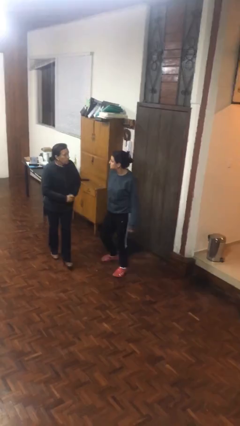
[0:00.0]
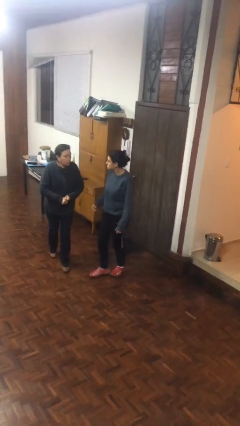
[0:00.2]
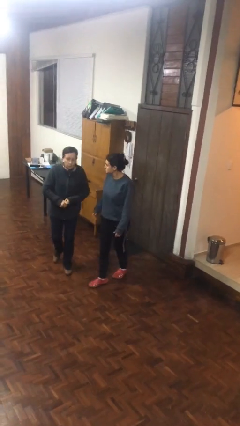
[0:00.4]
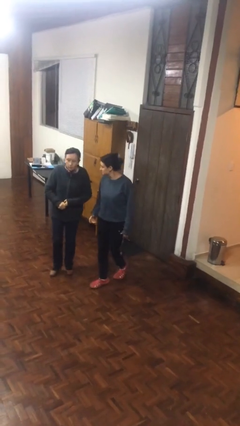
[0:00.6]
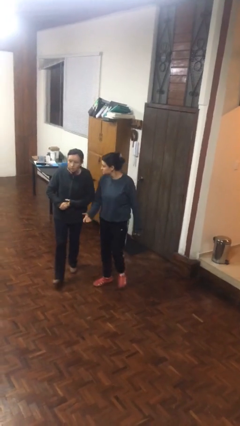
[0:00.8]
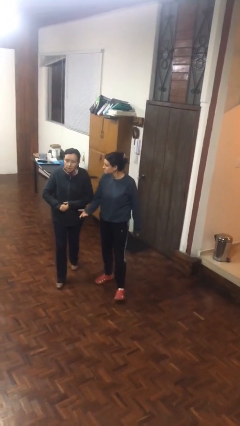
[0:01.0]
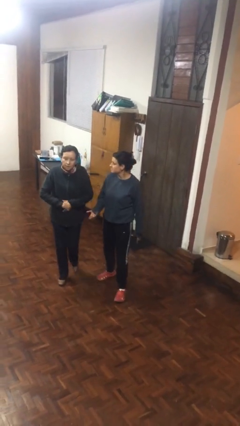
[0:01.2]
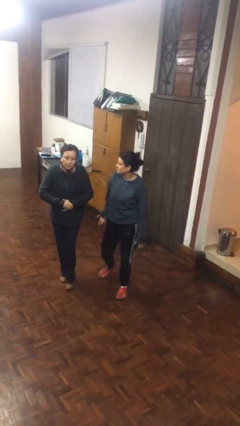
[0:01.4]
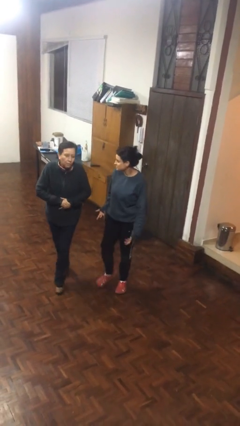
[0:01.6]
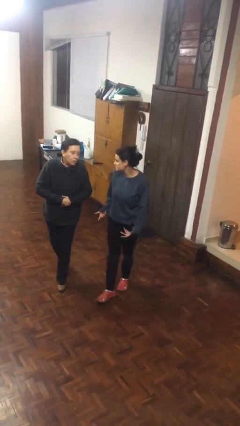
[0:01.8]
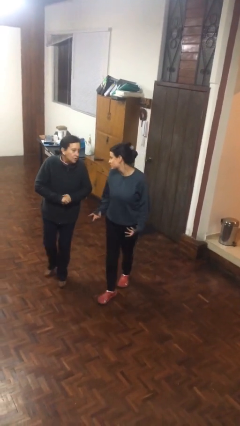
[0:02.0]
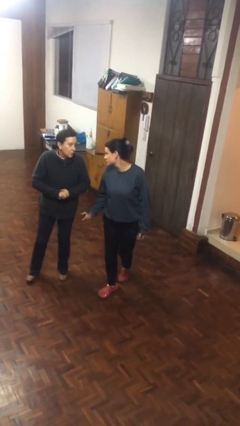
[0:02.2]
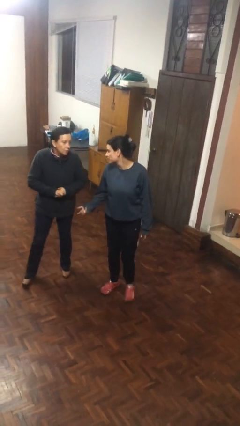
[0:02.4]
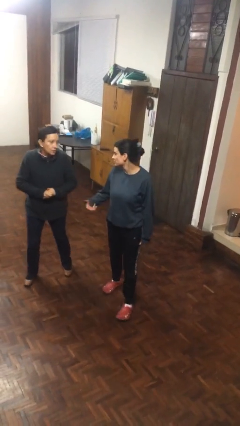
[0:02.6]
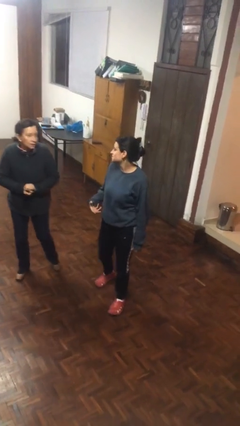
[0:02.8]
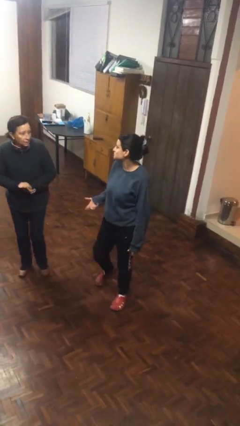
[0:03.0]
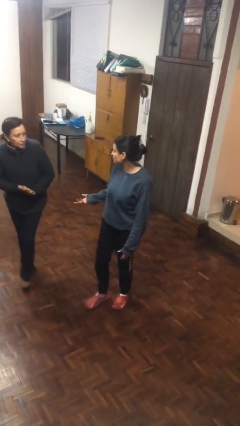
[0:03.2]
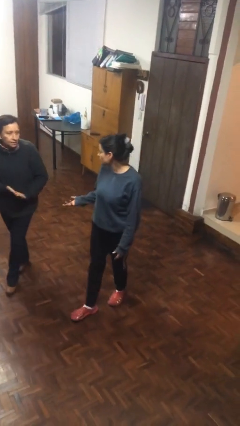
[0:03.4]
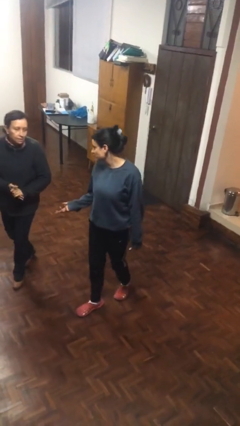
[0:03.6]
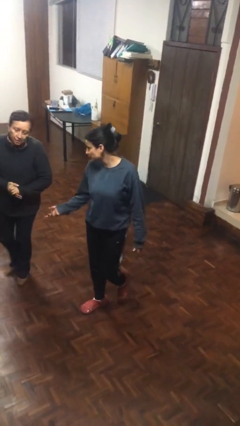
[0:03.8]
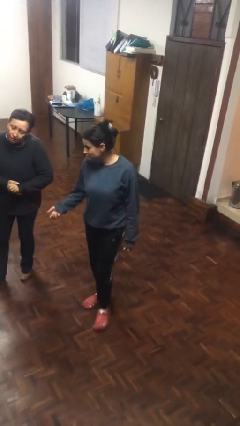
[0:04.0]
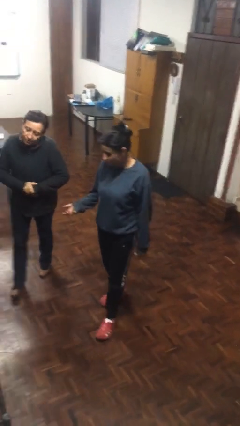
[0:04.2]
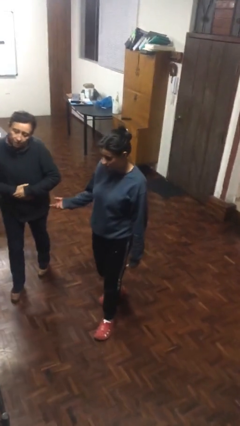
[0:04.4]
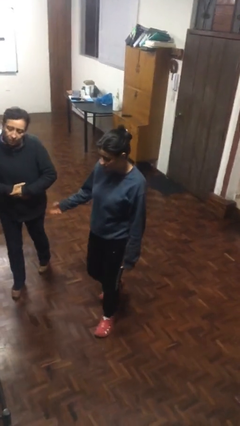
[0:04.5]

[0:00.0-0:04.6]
person talks to person

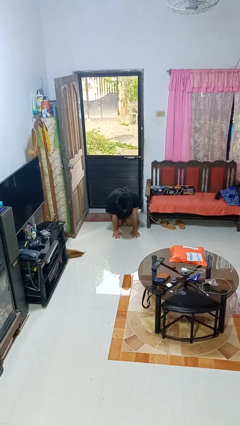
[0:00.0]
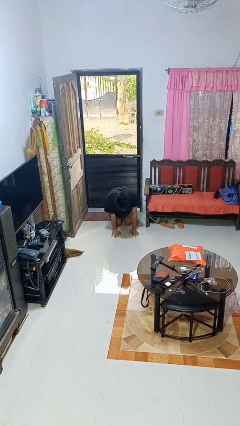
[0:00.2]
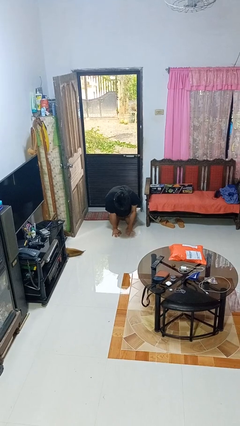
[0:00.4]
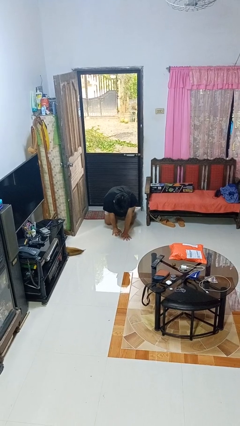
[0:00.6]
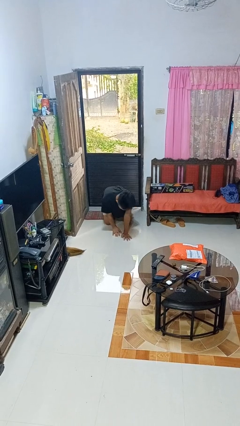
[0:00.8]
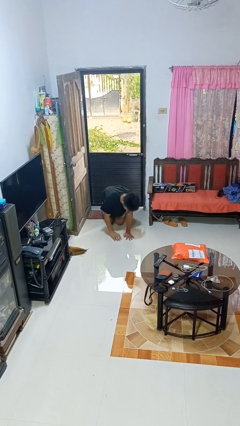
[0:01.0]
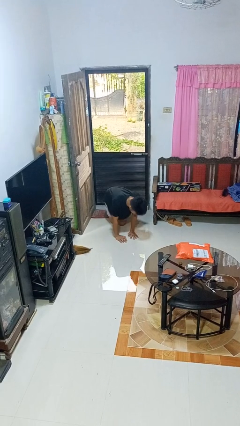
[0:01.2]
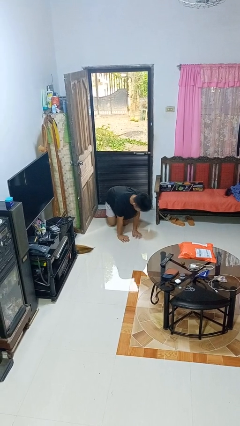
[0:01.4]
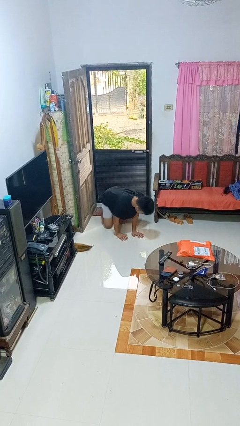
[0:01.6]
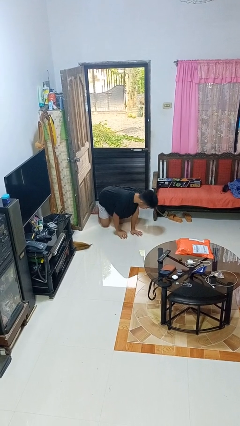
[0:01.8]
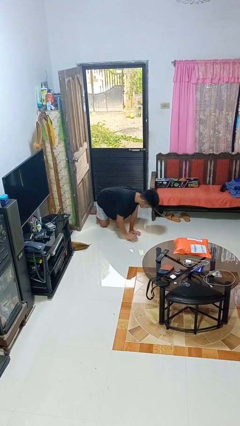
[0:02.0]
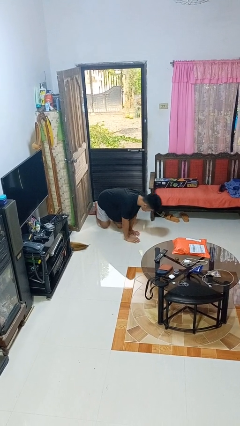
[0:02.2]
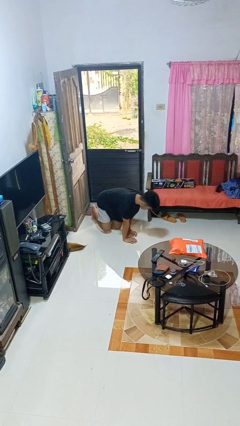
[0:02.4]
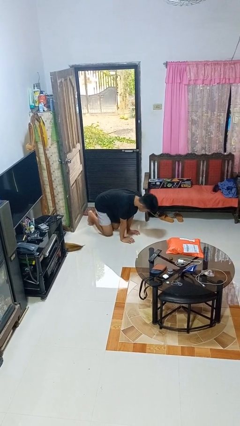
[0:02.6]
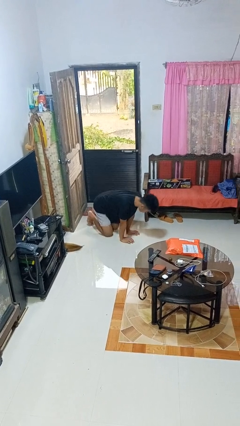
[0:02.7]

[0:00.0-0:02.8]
person crawls

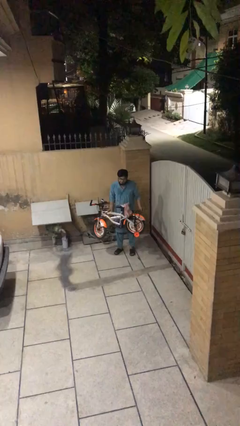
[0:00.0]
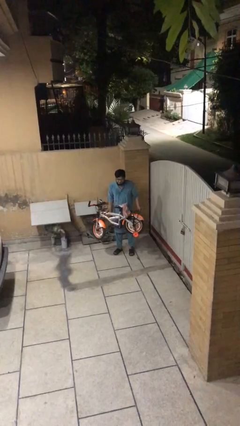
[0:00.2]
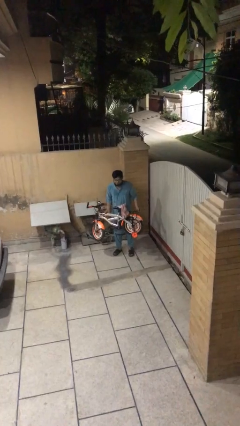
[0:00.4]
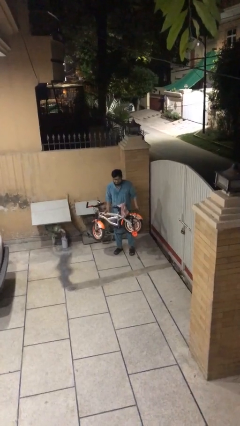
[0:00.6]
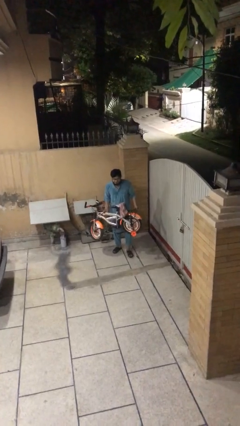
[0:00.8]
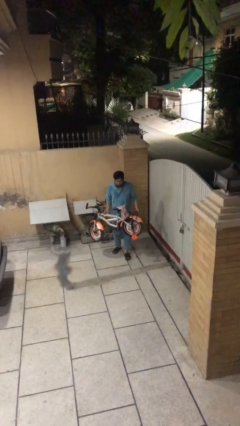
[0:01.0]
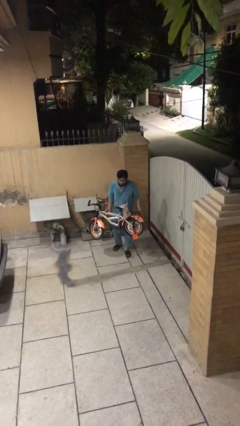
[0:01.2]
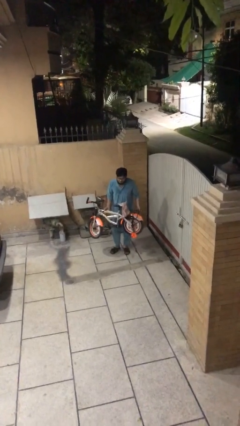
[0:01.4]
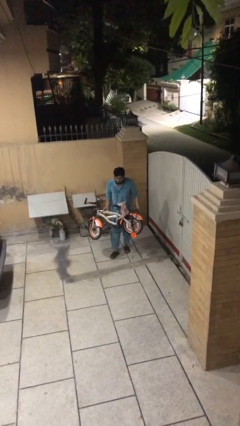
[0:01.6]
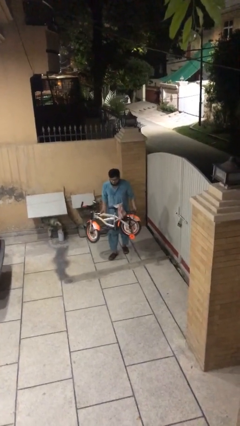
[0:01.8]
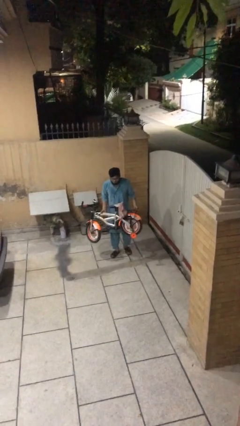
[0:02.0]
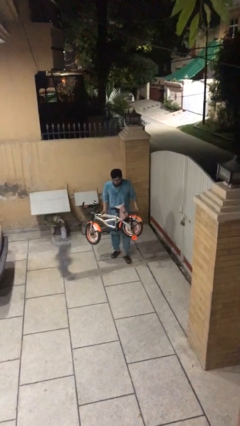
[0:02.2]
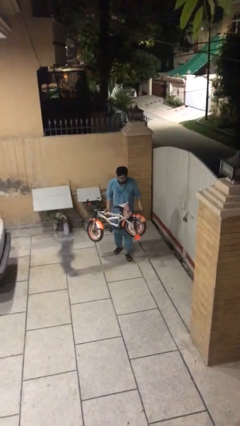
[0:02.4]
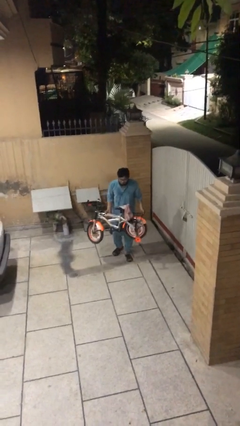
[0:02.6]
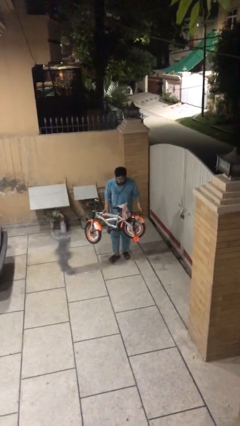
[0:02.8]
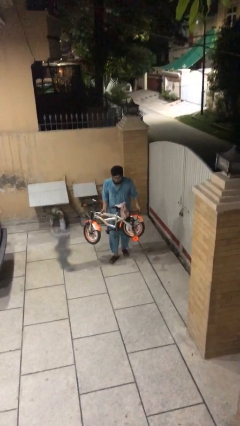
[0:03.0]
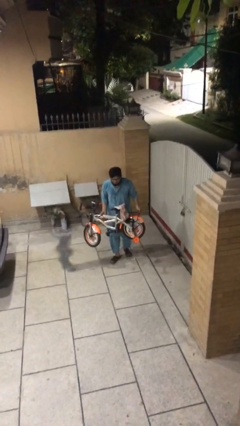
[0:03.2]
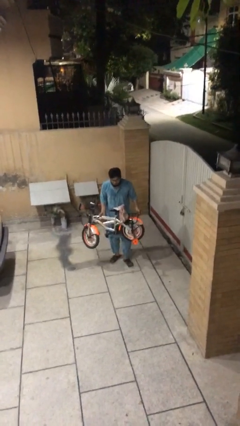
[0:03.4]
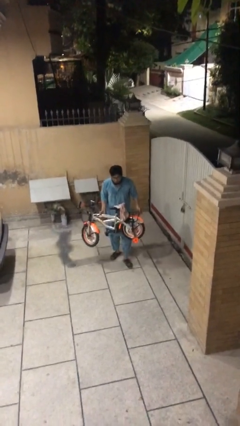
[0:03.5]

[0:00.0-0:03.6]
person carries heavy object

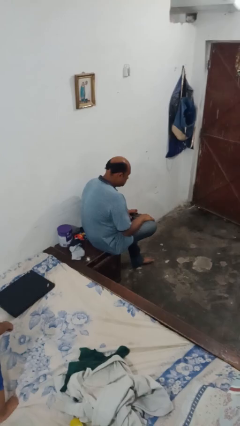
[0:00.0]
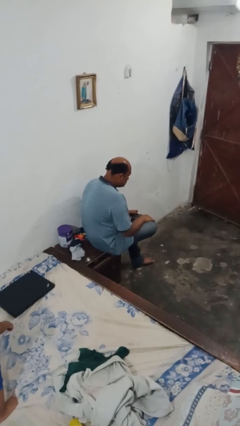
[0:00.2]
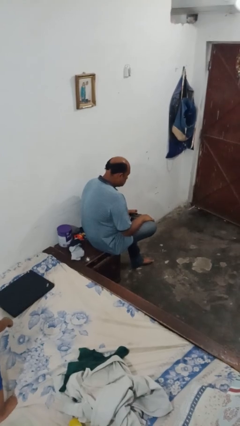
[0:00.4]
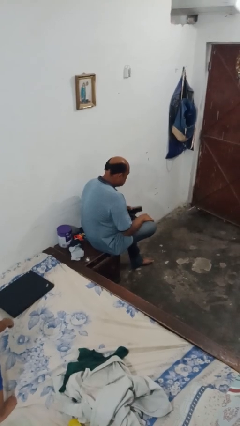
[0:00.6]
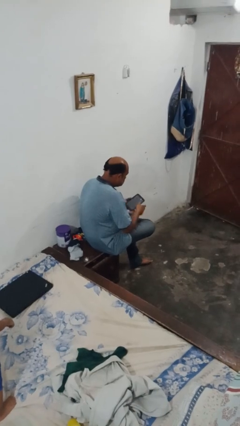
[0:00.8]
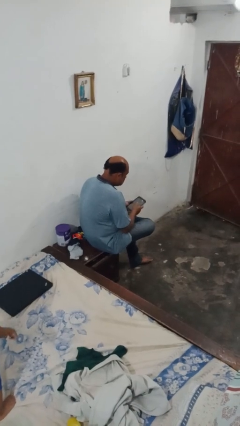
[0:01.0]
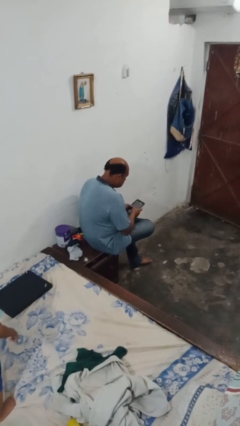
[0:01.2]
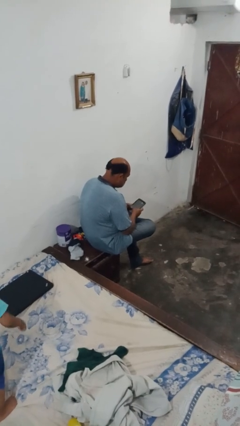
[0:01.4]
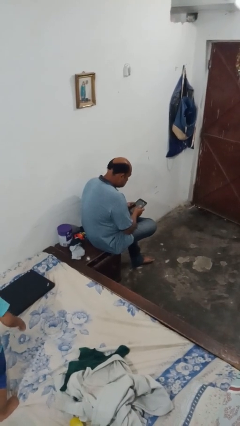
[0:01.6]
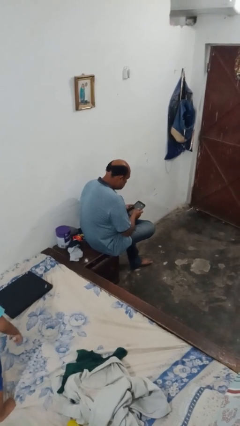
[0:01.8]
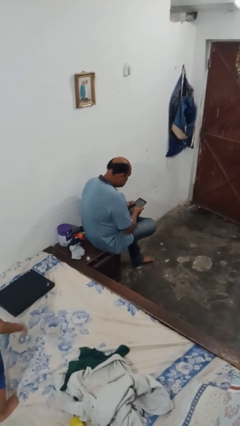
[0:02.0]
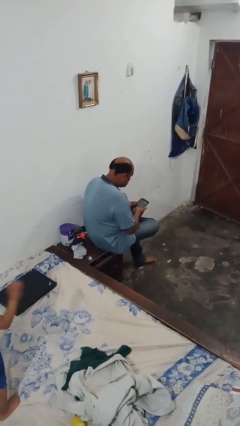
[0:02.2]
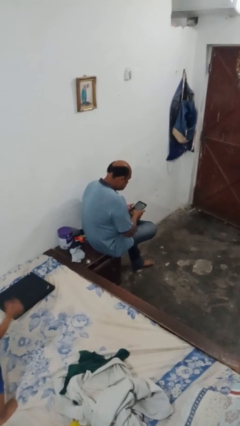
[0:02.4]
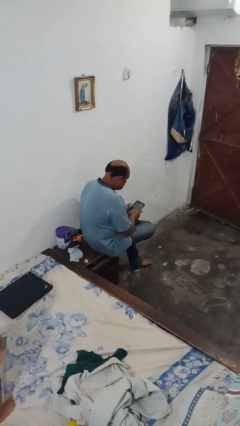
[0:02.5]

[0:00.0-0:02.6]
person interacts with tablet

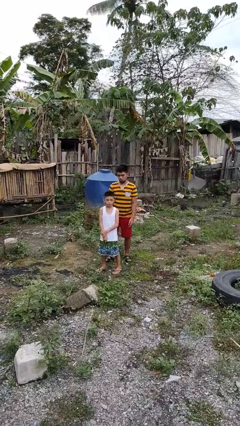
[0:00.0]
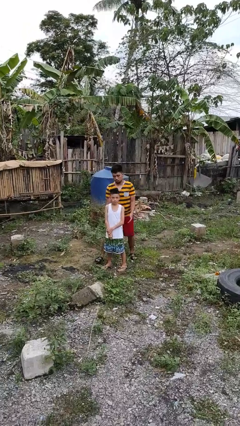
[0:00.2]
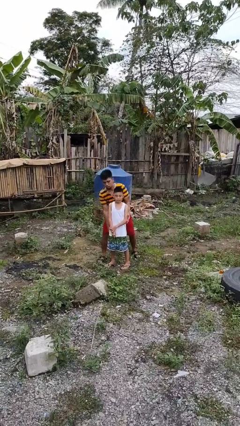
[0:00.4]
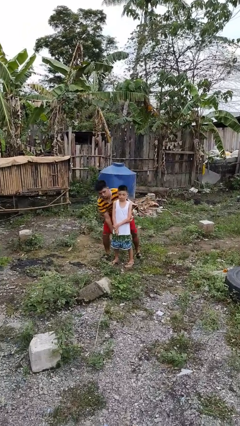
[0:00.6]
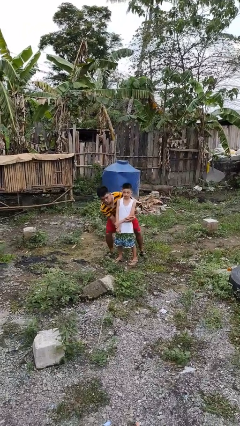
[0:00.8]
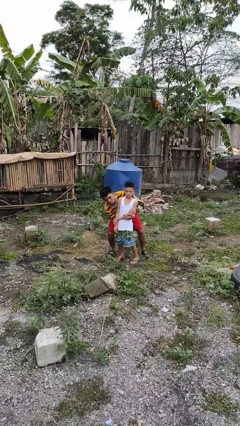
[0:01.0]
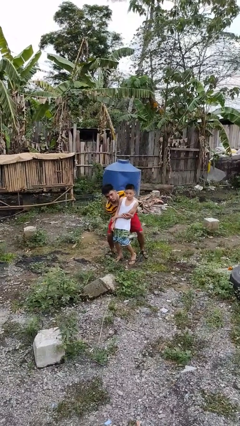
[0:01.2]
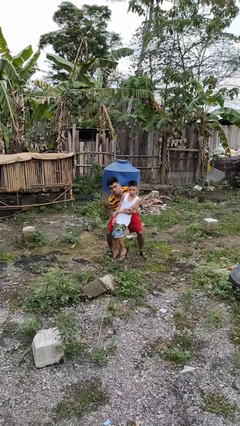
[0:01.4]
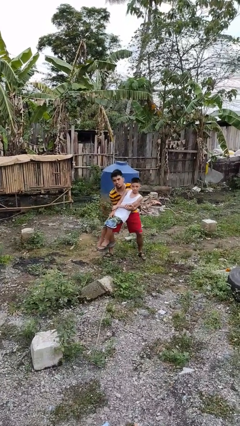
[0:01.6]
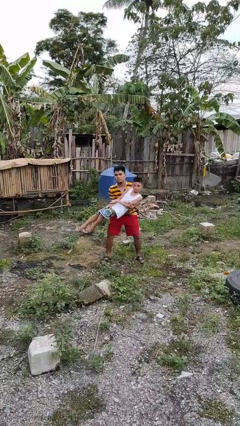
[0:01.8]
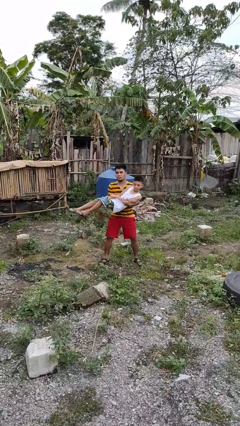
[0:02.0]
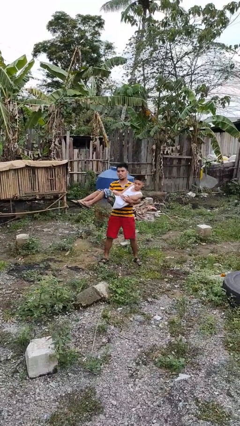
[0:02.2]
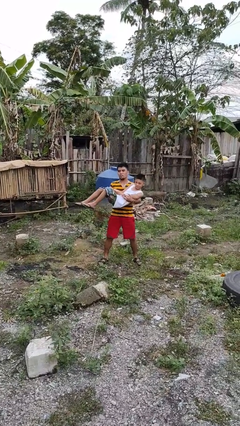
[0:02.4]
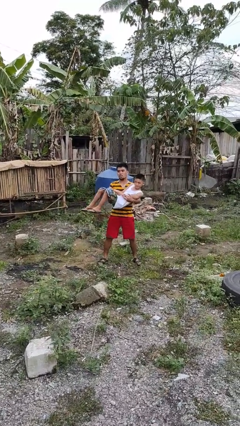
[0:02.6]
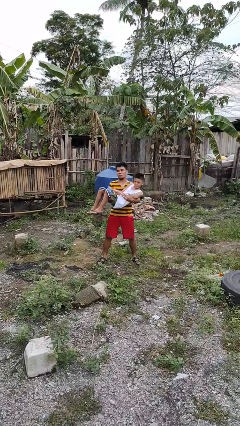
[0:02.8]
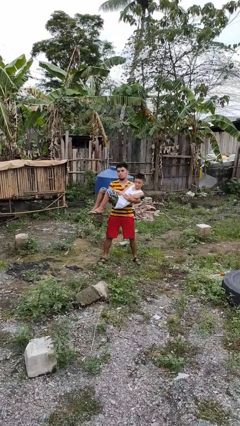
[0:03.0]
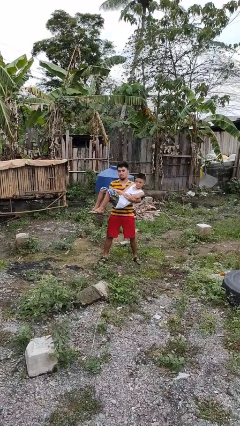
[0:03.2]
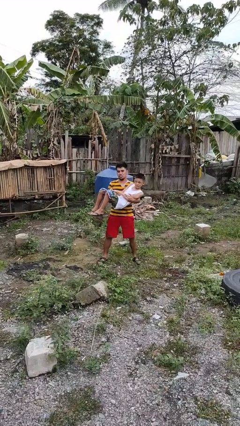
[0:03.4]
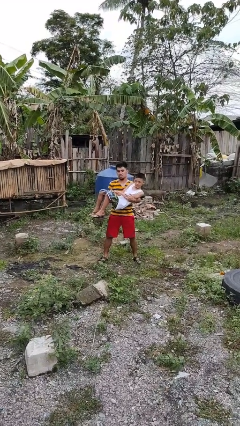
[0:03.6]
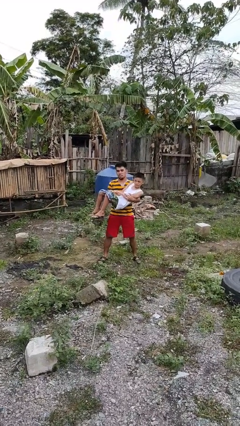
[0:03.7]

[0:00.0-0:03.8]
person picks up person
